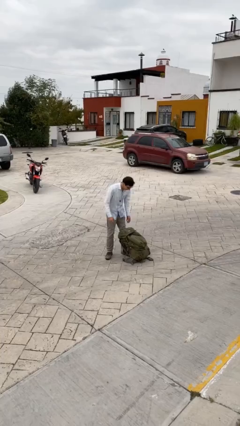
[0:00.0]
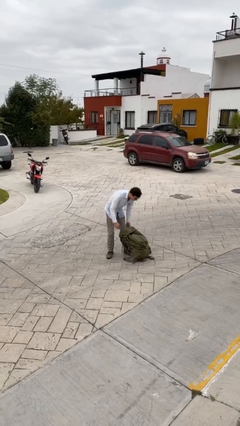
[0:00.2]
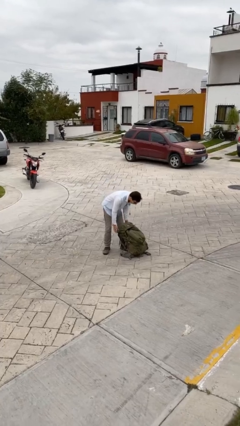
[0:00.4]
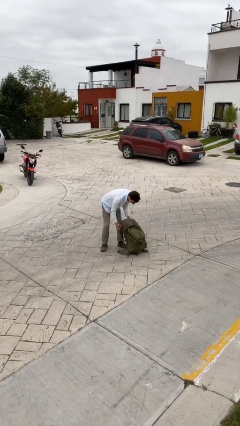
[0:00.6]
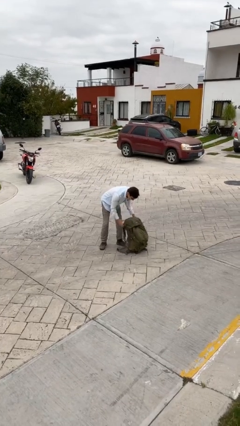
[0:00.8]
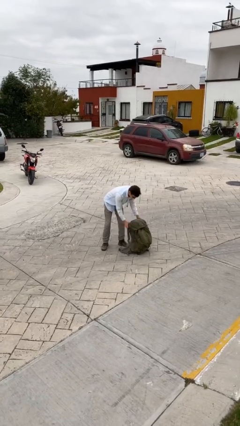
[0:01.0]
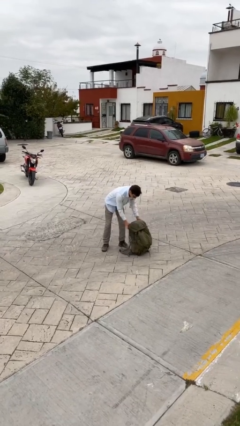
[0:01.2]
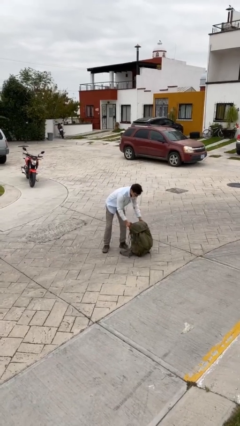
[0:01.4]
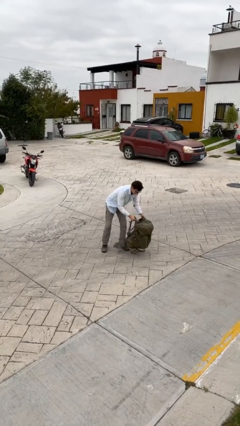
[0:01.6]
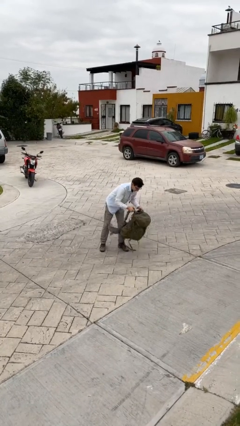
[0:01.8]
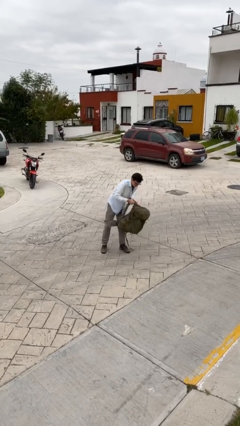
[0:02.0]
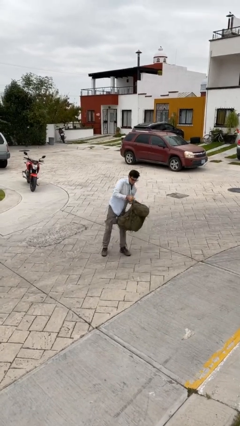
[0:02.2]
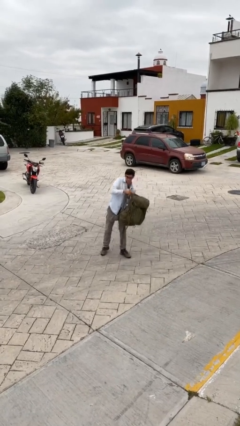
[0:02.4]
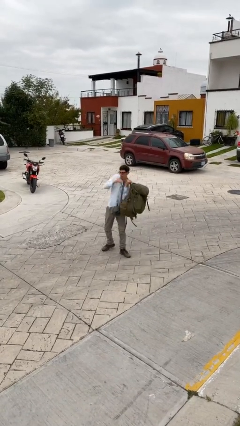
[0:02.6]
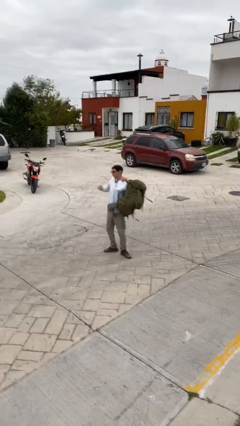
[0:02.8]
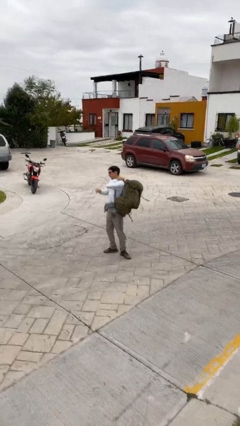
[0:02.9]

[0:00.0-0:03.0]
person picks up object from floor

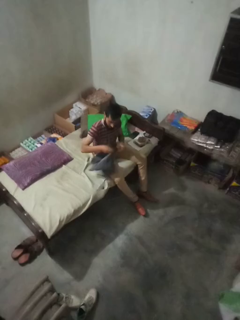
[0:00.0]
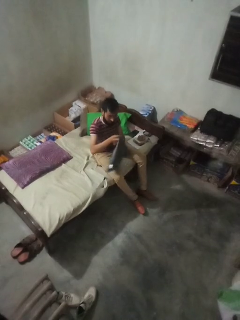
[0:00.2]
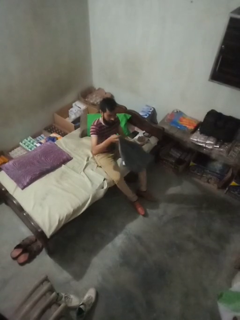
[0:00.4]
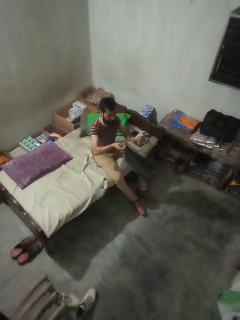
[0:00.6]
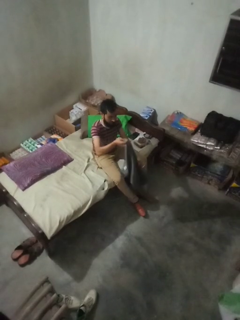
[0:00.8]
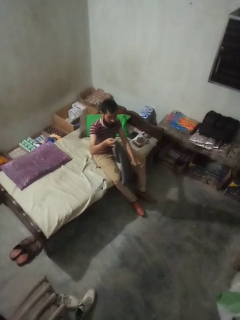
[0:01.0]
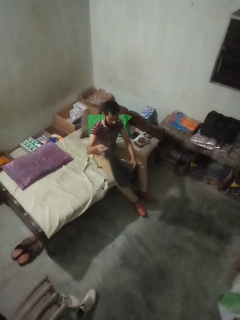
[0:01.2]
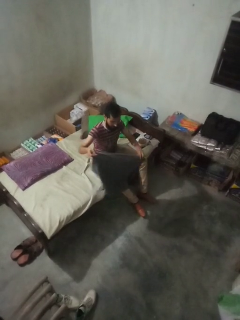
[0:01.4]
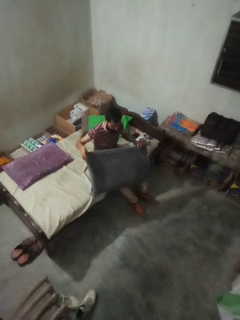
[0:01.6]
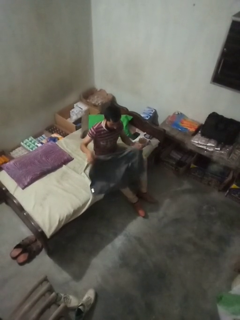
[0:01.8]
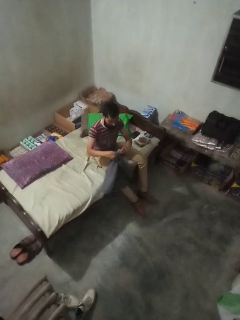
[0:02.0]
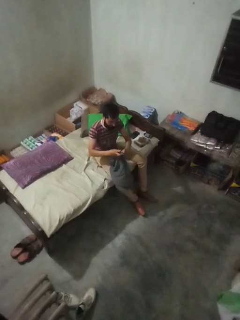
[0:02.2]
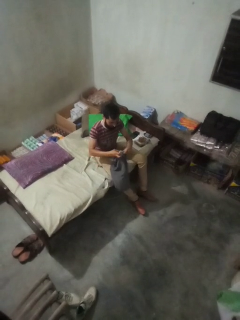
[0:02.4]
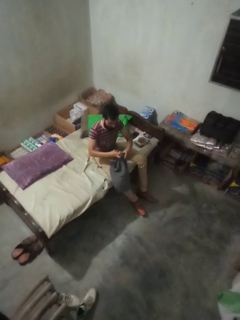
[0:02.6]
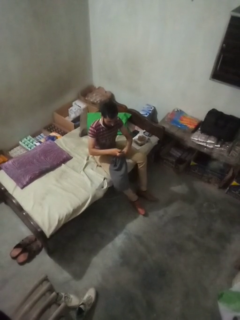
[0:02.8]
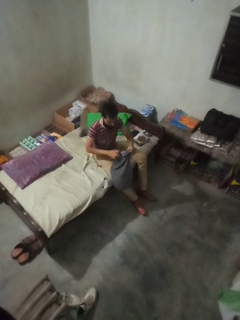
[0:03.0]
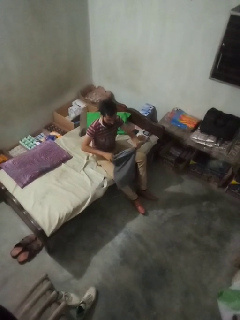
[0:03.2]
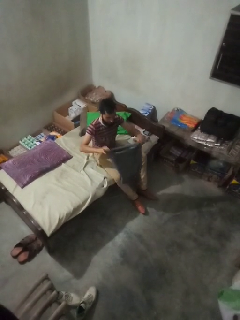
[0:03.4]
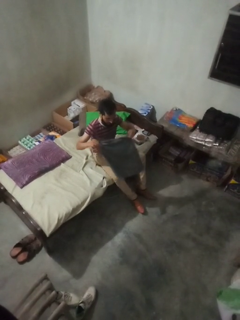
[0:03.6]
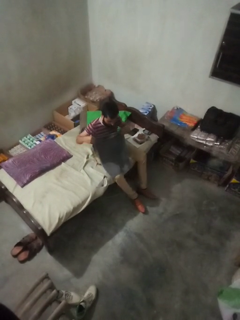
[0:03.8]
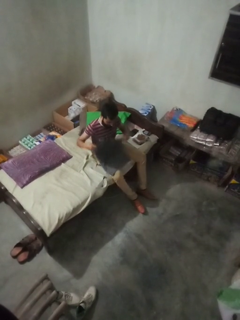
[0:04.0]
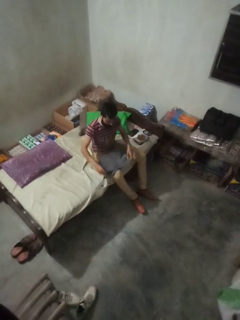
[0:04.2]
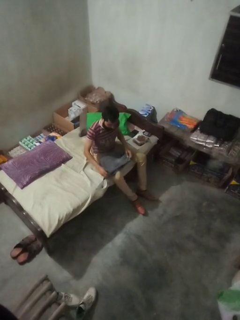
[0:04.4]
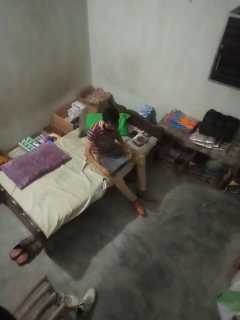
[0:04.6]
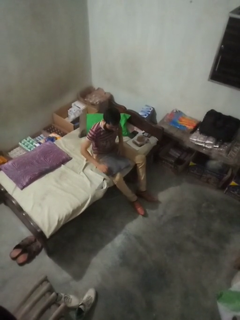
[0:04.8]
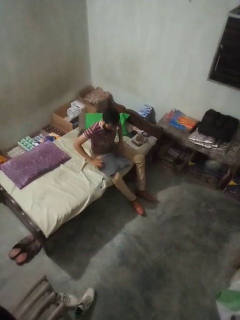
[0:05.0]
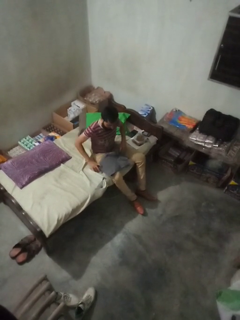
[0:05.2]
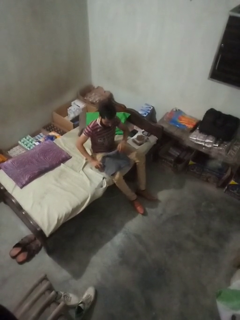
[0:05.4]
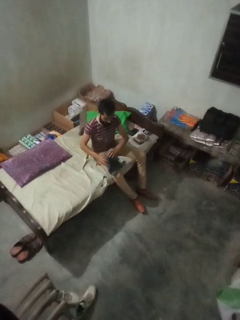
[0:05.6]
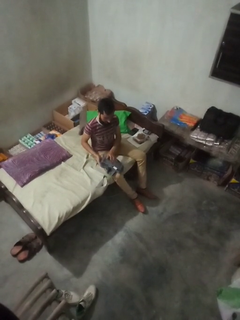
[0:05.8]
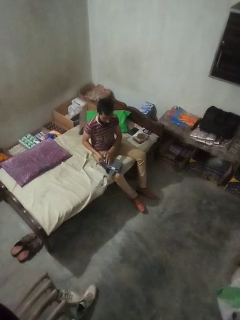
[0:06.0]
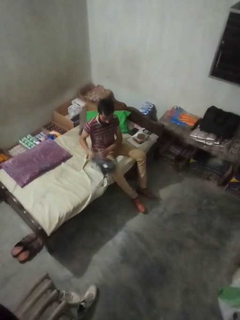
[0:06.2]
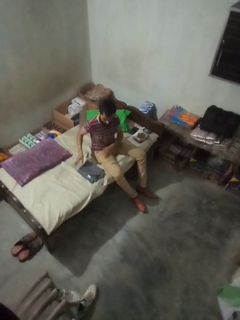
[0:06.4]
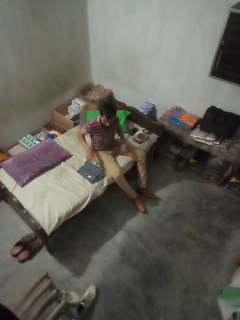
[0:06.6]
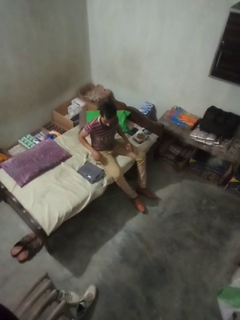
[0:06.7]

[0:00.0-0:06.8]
person folds towel

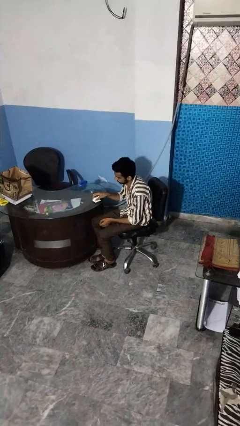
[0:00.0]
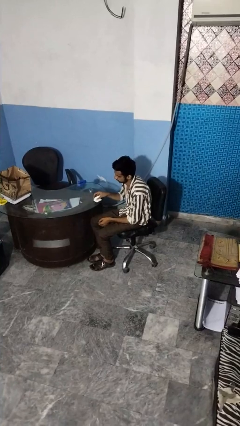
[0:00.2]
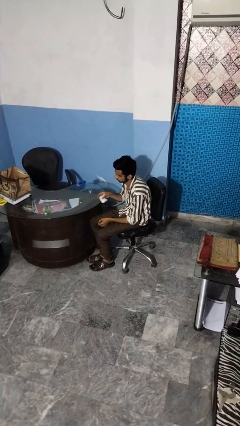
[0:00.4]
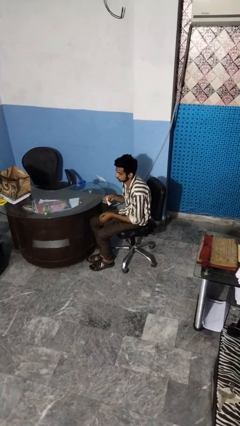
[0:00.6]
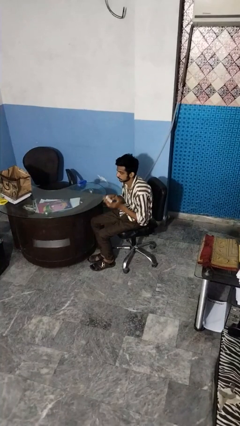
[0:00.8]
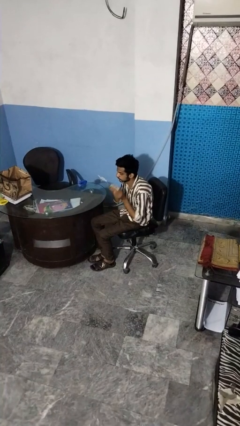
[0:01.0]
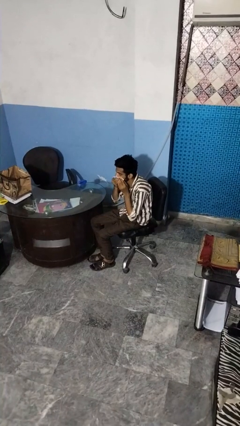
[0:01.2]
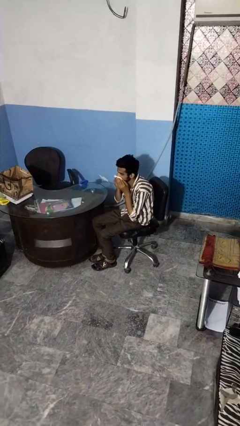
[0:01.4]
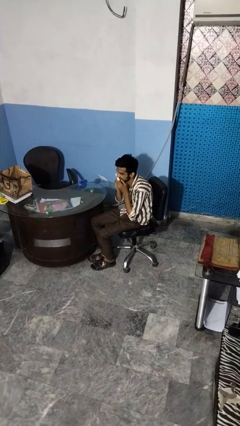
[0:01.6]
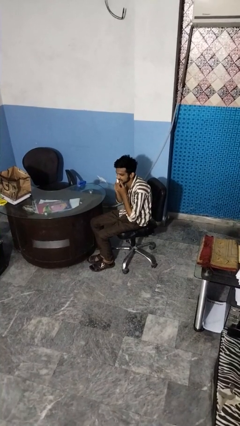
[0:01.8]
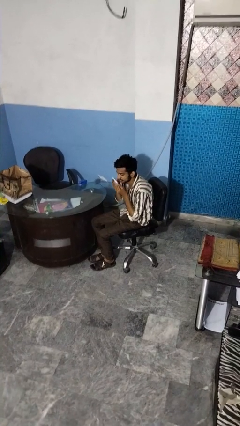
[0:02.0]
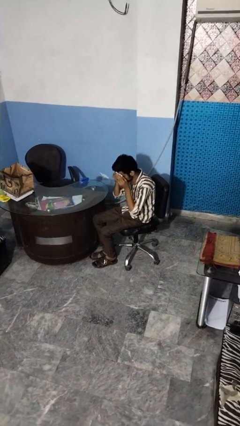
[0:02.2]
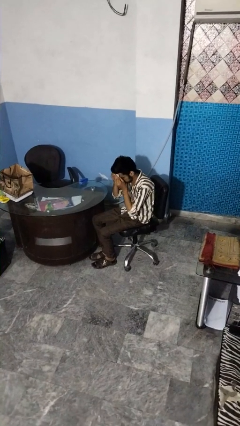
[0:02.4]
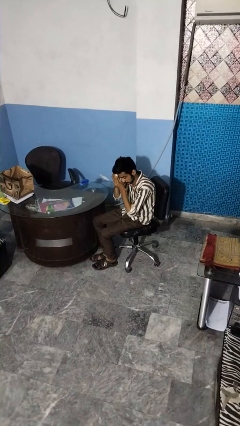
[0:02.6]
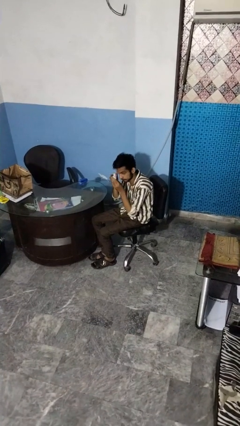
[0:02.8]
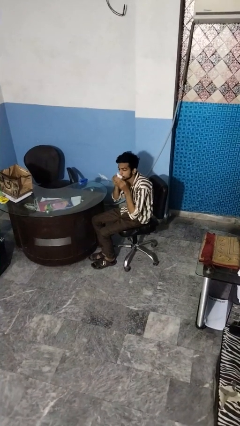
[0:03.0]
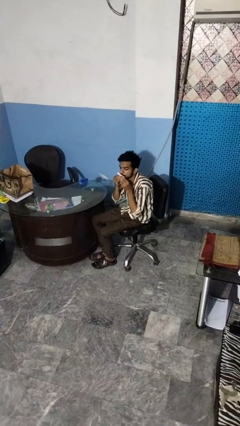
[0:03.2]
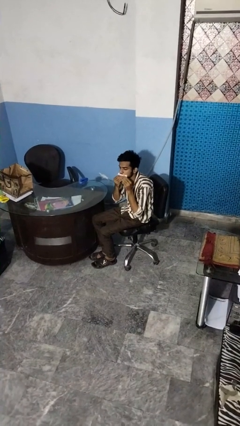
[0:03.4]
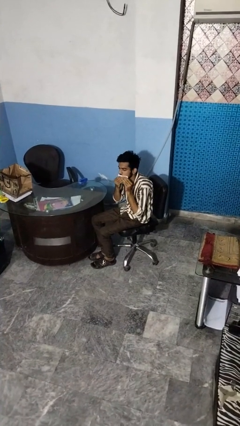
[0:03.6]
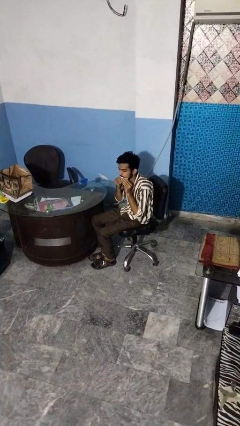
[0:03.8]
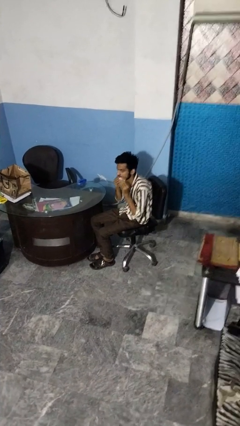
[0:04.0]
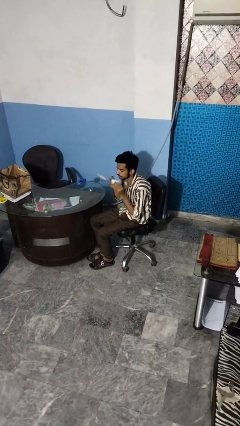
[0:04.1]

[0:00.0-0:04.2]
person wipes mouth with napkin

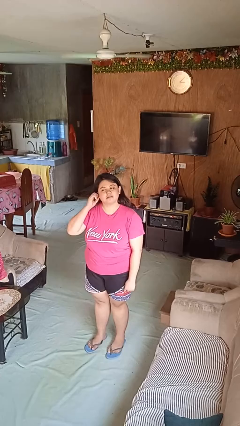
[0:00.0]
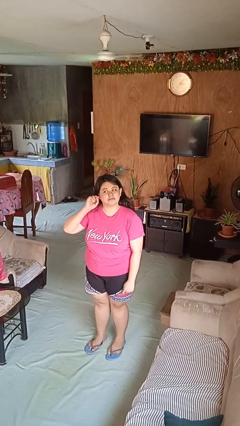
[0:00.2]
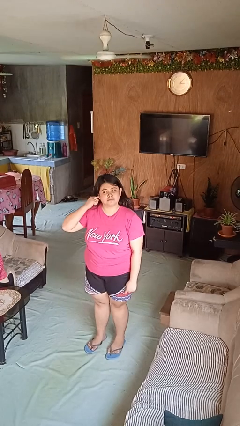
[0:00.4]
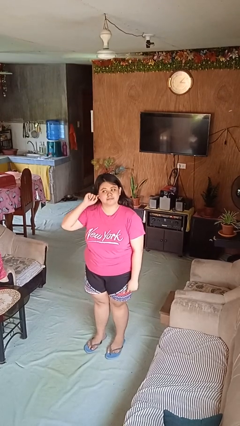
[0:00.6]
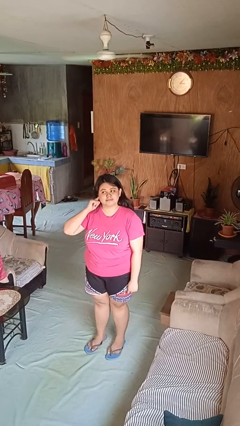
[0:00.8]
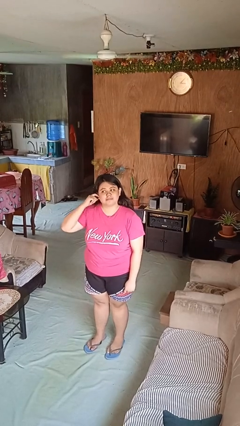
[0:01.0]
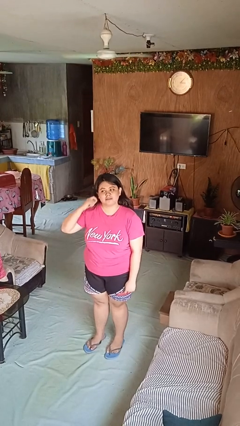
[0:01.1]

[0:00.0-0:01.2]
person touches earlobe

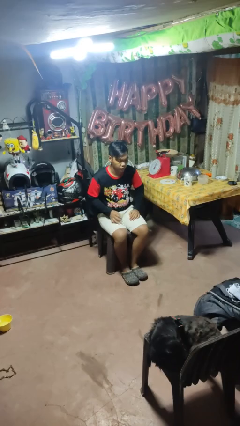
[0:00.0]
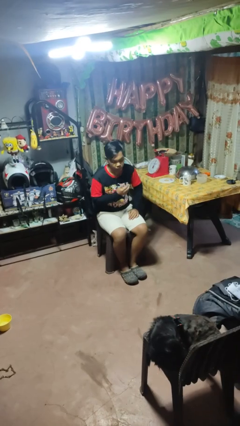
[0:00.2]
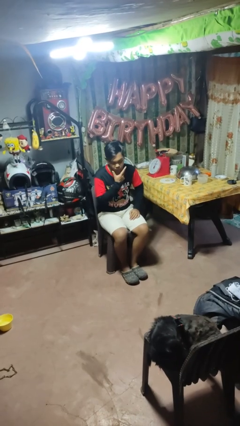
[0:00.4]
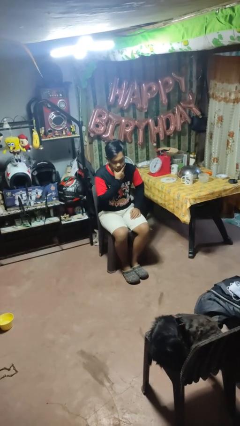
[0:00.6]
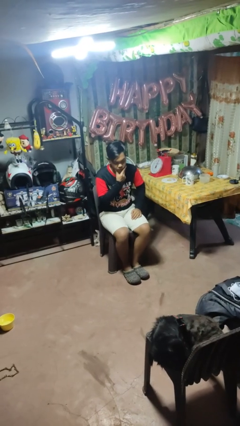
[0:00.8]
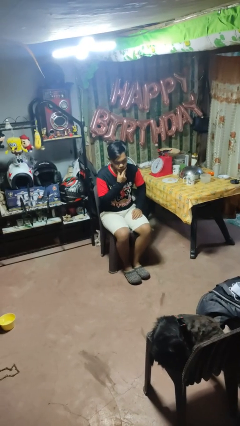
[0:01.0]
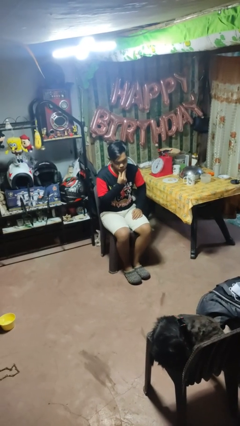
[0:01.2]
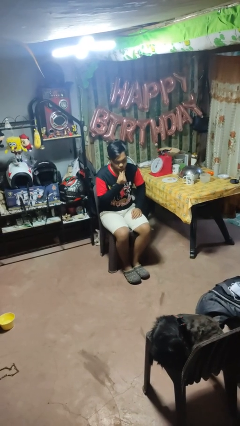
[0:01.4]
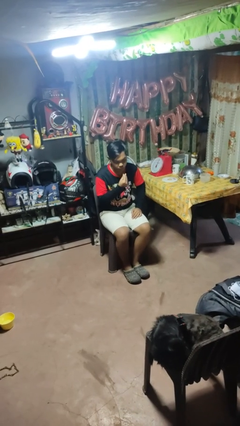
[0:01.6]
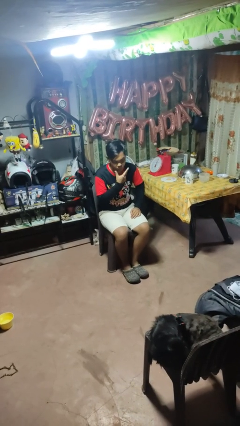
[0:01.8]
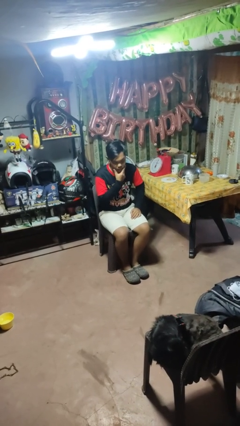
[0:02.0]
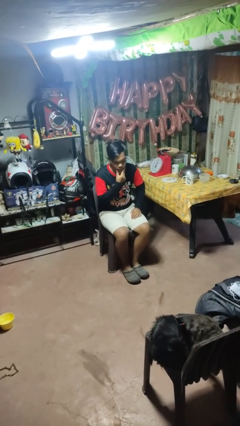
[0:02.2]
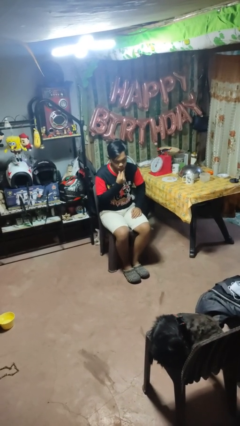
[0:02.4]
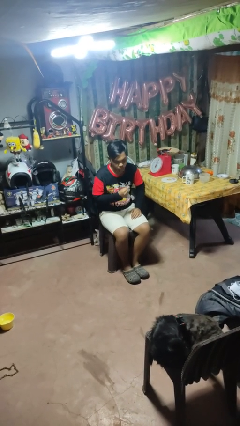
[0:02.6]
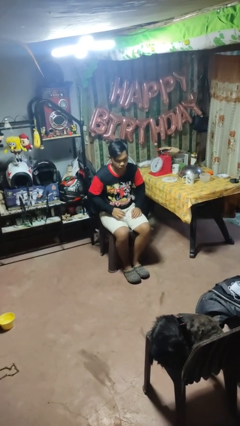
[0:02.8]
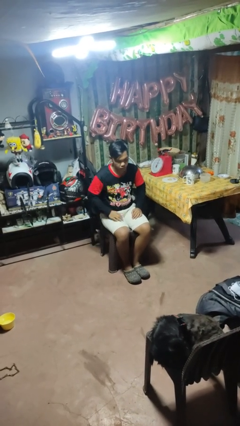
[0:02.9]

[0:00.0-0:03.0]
person strokes chin

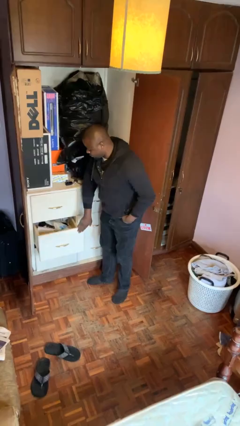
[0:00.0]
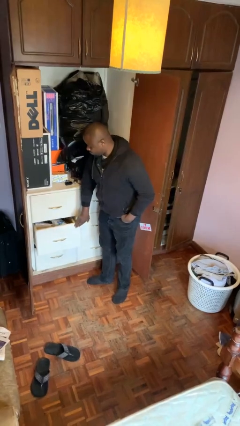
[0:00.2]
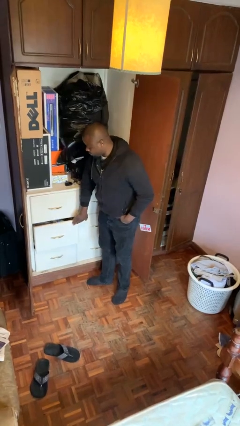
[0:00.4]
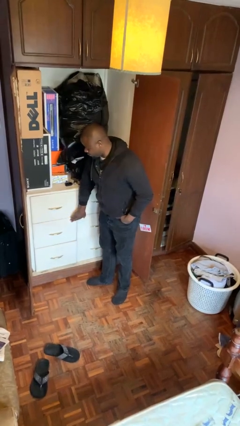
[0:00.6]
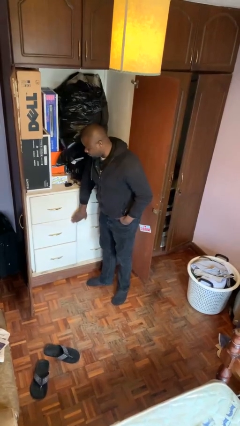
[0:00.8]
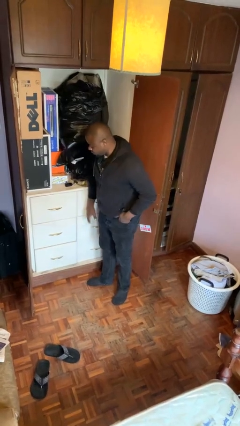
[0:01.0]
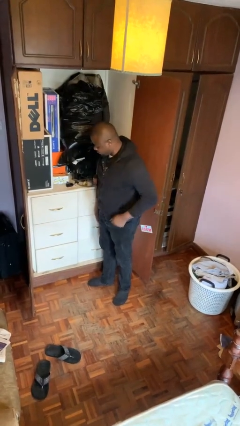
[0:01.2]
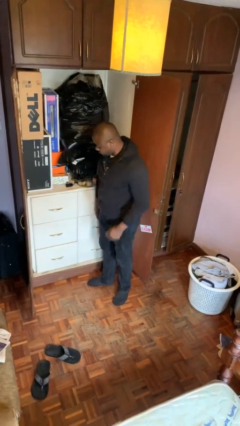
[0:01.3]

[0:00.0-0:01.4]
person closes dresser drawer
